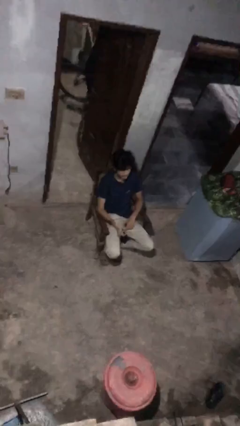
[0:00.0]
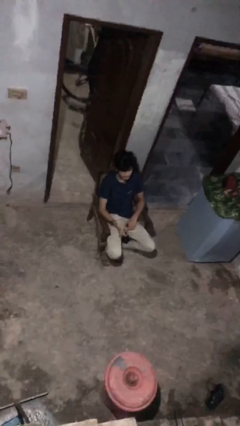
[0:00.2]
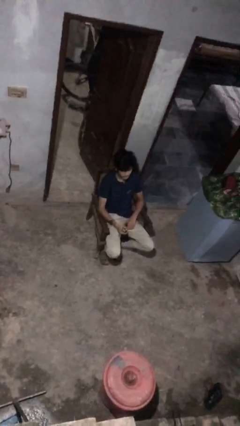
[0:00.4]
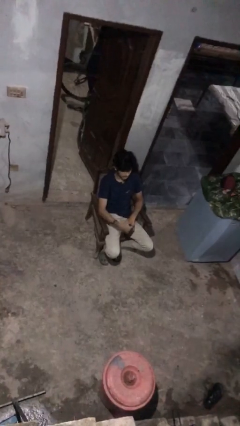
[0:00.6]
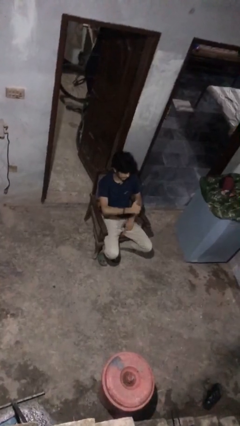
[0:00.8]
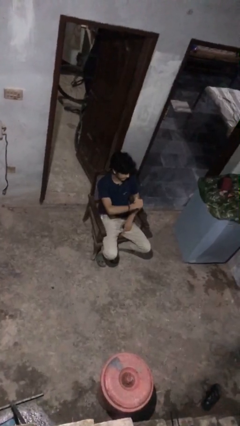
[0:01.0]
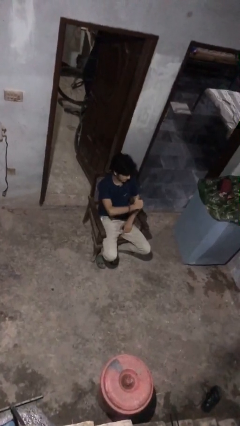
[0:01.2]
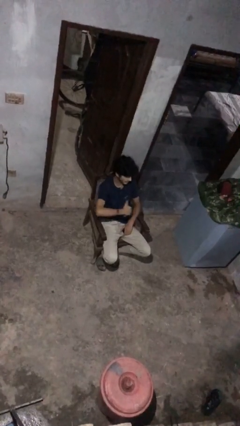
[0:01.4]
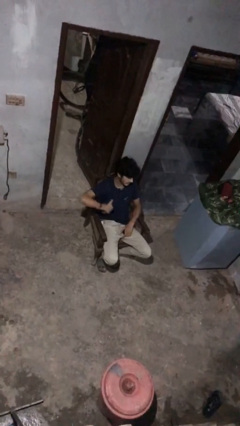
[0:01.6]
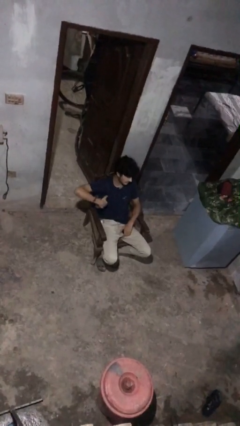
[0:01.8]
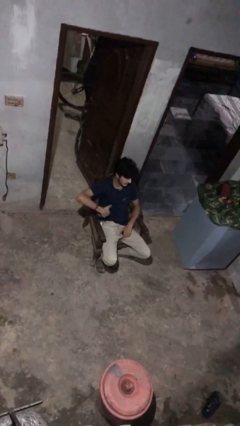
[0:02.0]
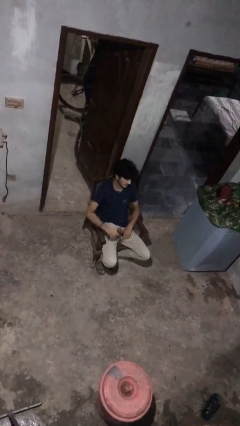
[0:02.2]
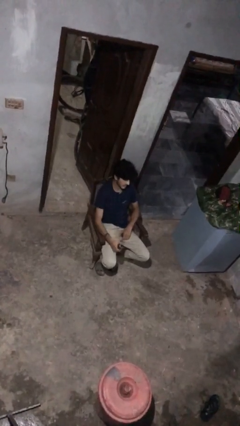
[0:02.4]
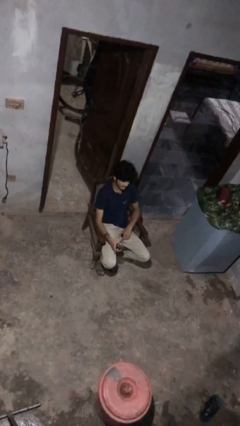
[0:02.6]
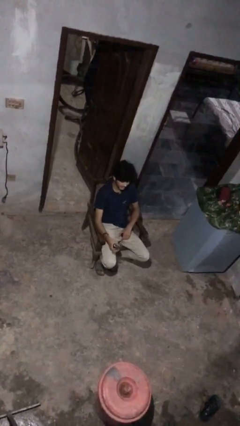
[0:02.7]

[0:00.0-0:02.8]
person applies deodorant

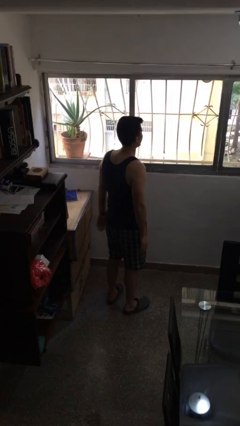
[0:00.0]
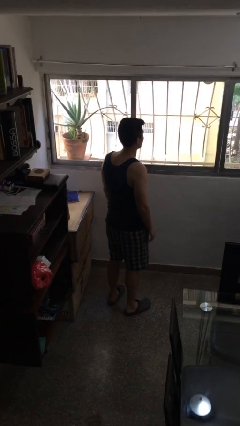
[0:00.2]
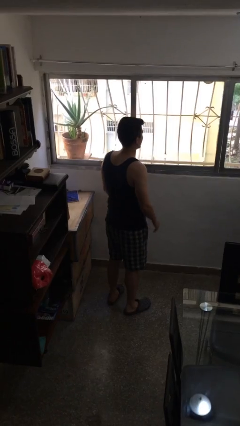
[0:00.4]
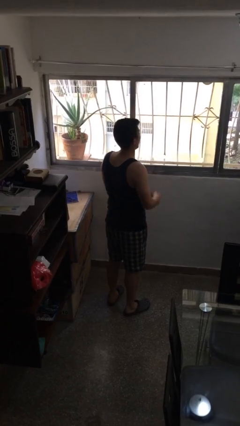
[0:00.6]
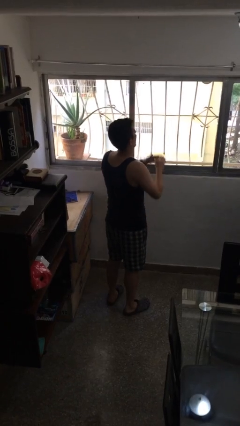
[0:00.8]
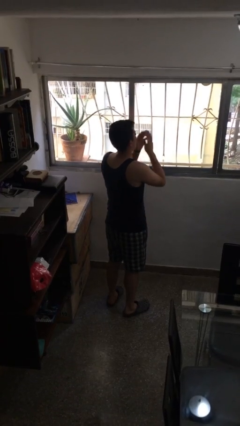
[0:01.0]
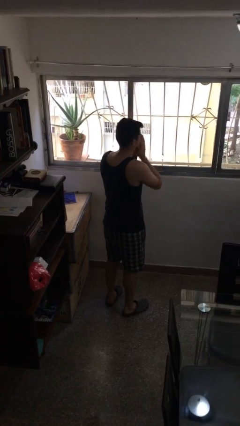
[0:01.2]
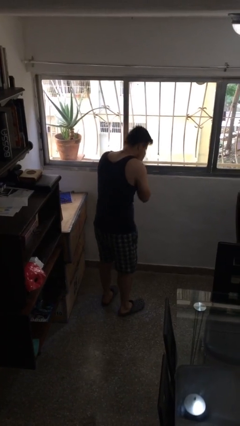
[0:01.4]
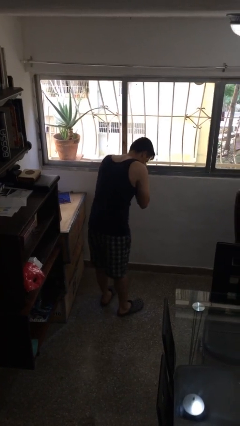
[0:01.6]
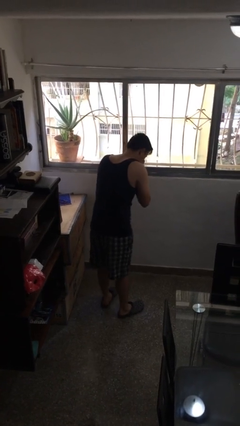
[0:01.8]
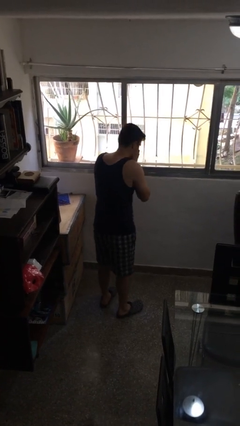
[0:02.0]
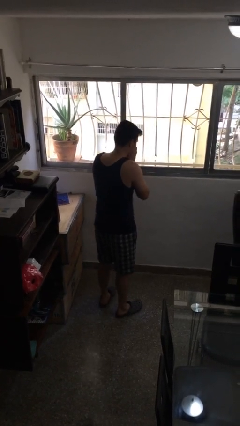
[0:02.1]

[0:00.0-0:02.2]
person sneezes into hand

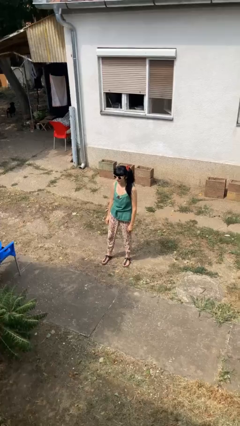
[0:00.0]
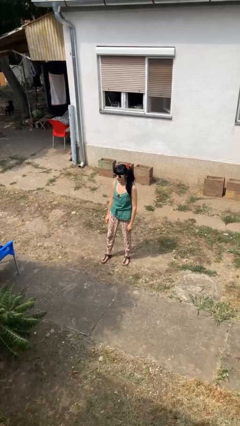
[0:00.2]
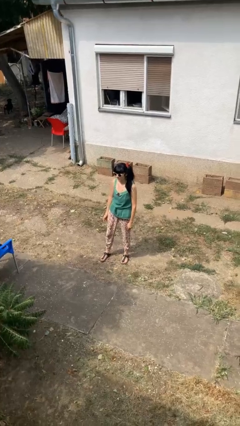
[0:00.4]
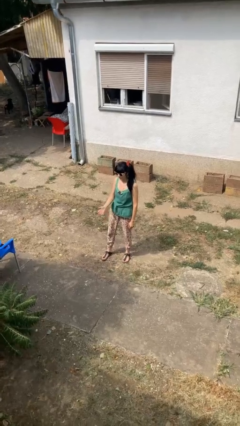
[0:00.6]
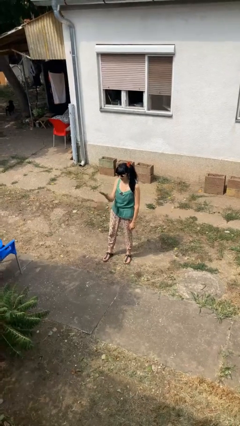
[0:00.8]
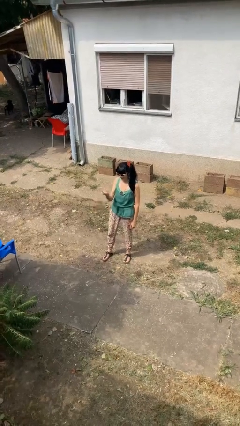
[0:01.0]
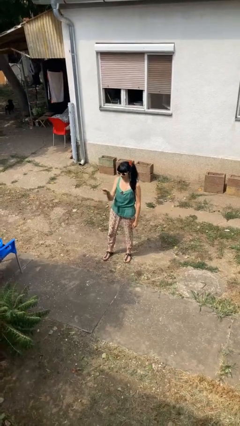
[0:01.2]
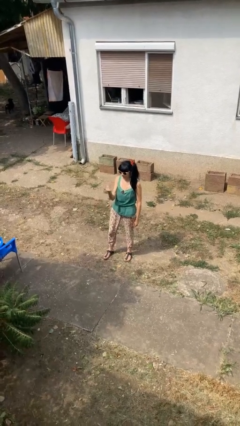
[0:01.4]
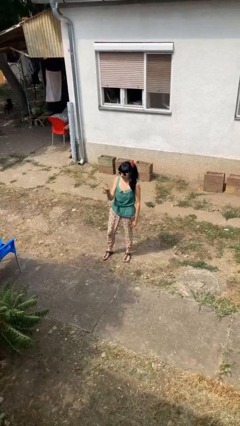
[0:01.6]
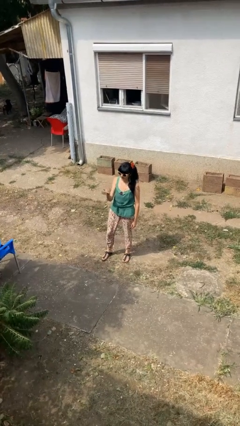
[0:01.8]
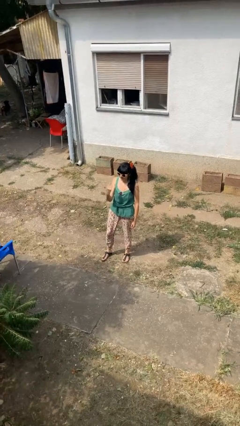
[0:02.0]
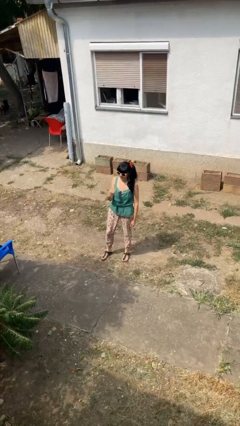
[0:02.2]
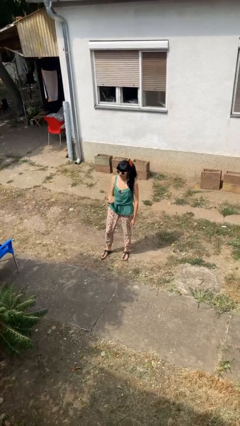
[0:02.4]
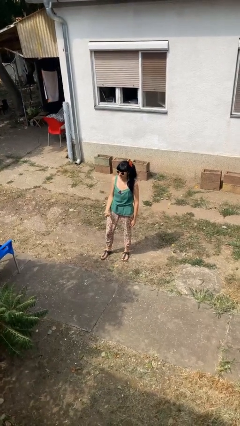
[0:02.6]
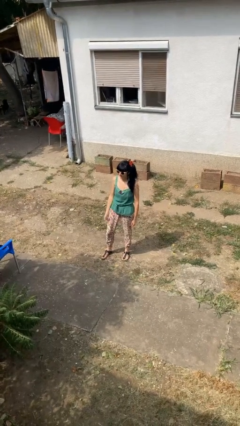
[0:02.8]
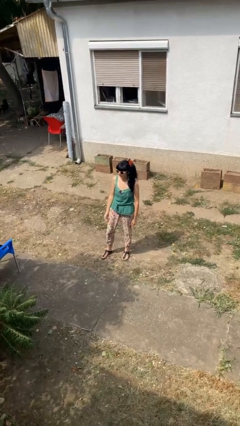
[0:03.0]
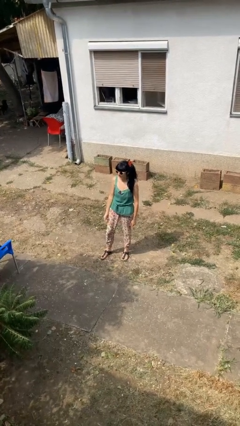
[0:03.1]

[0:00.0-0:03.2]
person gestures come here

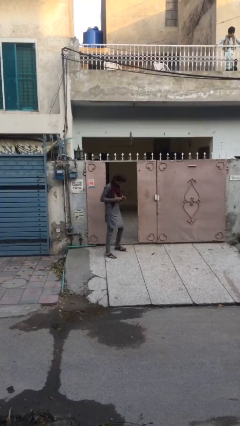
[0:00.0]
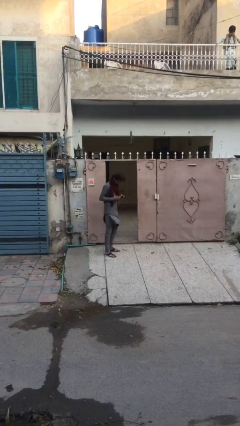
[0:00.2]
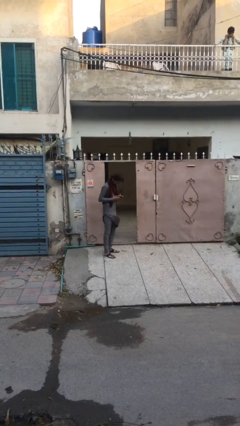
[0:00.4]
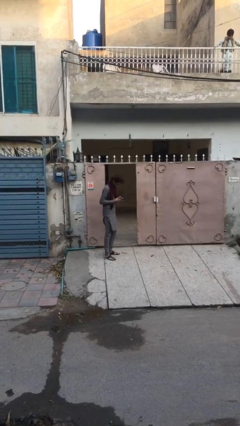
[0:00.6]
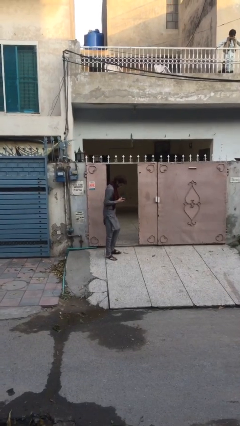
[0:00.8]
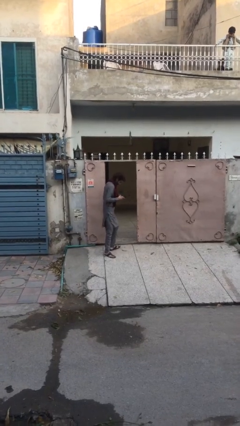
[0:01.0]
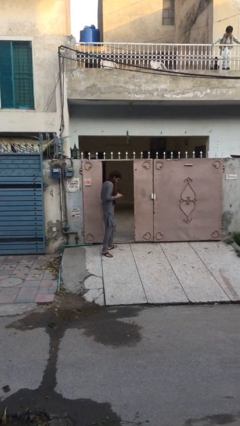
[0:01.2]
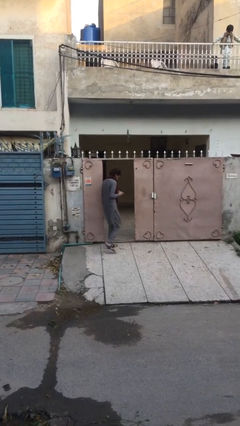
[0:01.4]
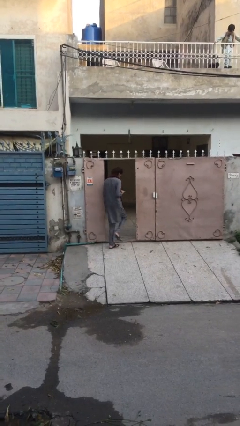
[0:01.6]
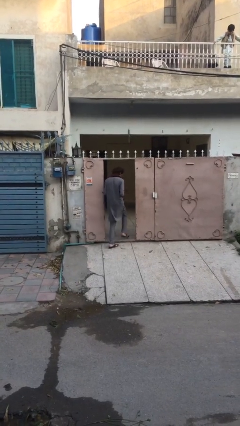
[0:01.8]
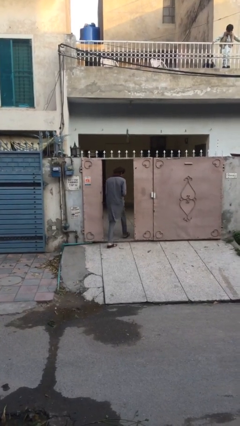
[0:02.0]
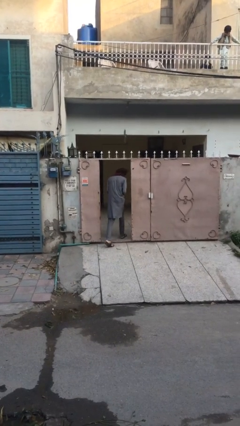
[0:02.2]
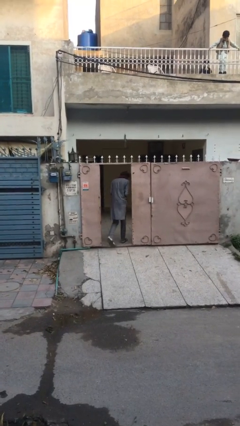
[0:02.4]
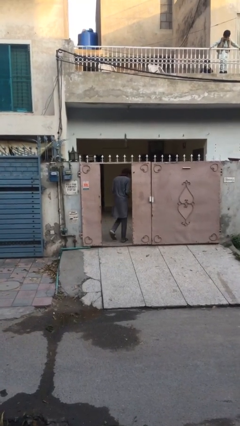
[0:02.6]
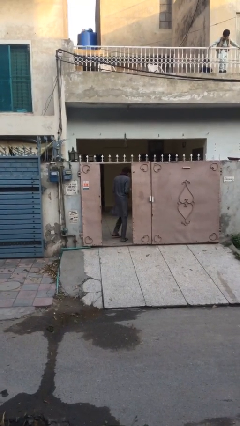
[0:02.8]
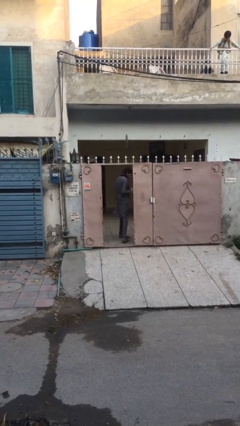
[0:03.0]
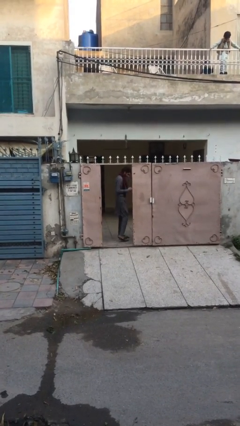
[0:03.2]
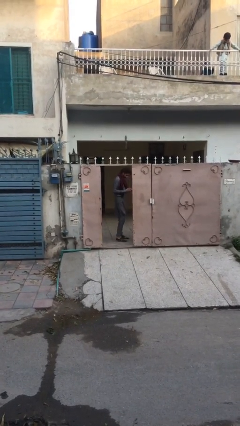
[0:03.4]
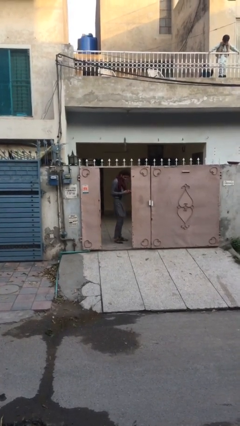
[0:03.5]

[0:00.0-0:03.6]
person enters scene through structure

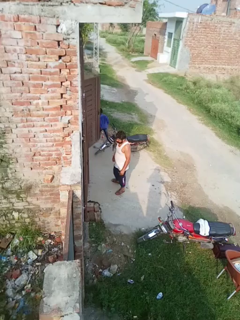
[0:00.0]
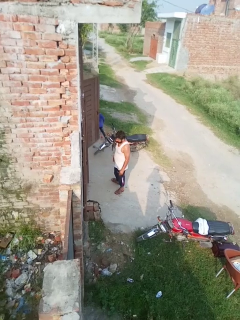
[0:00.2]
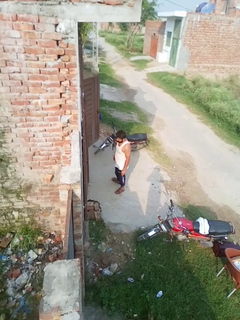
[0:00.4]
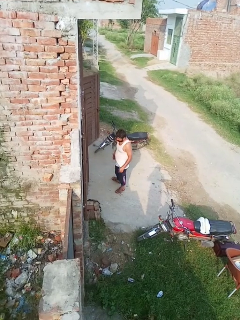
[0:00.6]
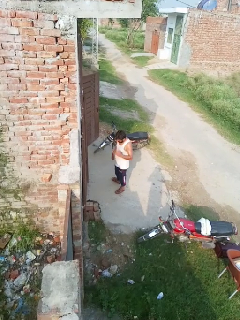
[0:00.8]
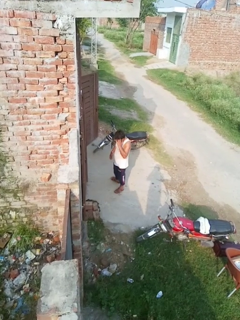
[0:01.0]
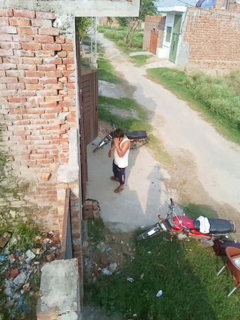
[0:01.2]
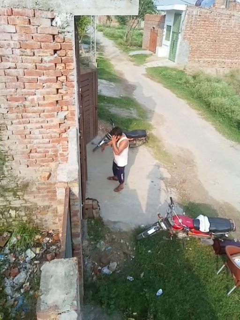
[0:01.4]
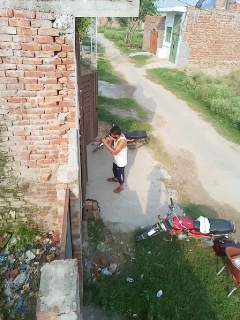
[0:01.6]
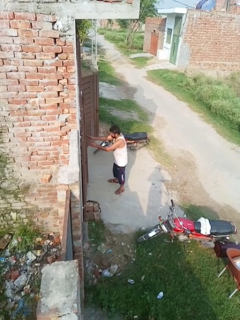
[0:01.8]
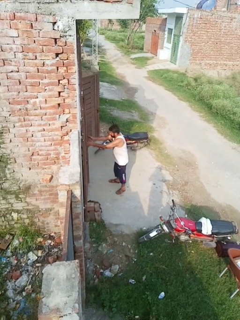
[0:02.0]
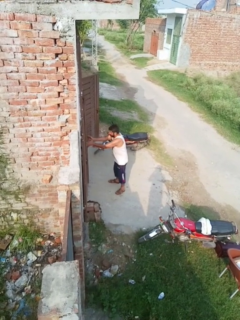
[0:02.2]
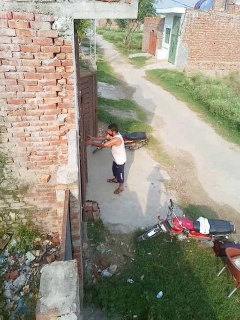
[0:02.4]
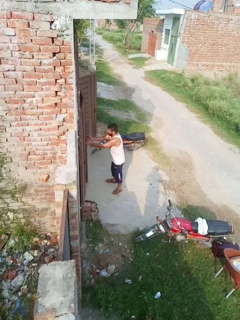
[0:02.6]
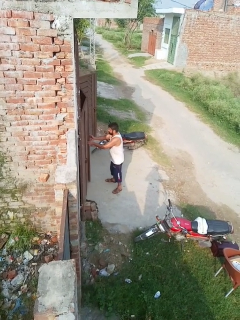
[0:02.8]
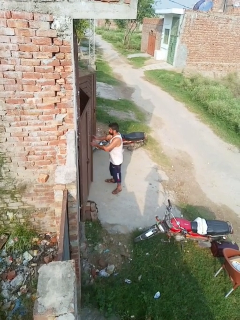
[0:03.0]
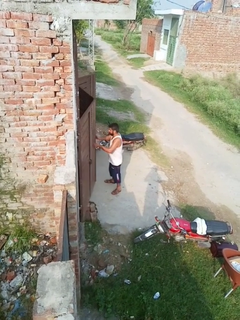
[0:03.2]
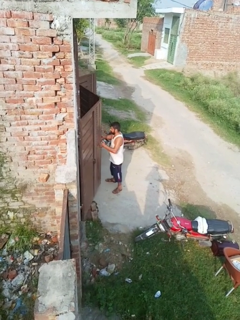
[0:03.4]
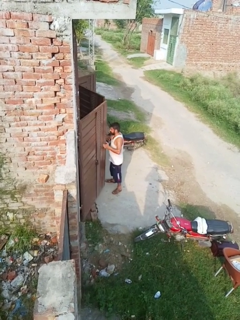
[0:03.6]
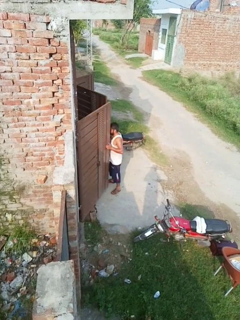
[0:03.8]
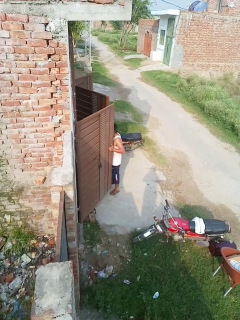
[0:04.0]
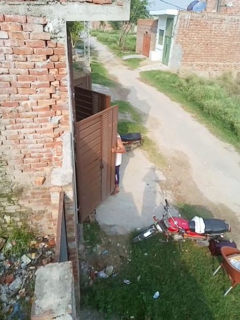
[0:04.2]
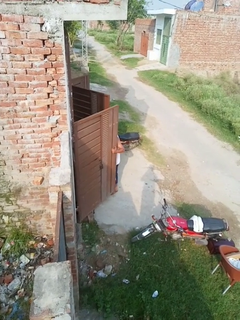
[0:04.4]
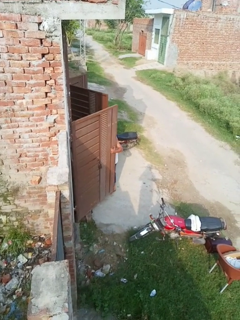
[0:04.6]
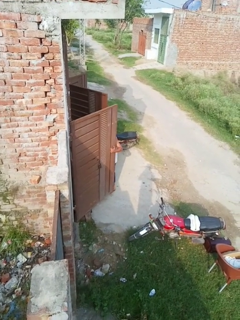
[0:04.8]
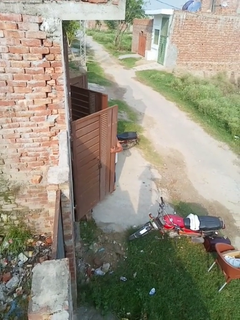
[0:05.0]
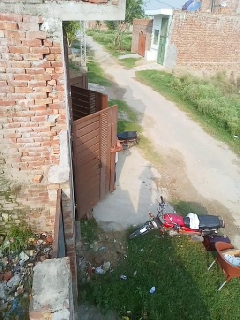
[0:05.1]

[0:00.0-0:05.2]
person opens gate

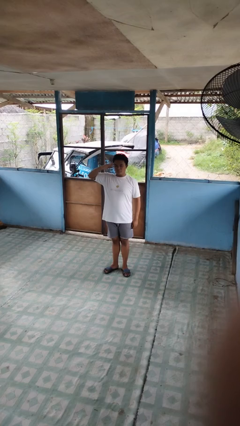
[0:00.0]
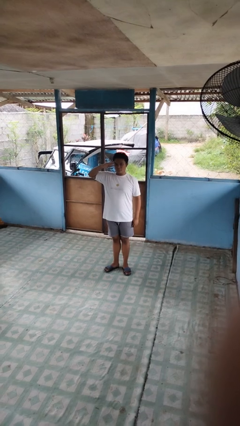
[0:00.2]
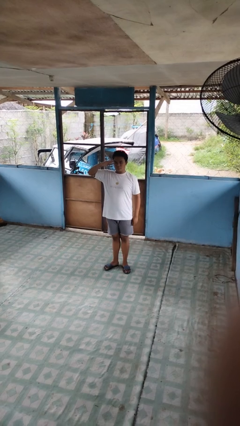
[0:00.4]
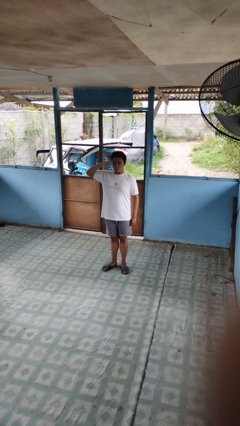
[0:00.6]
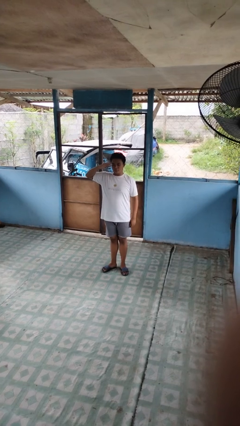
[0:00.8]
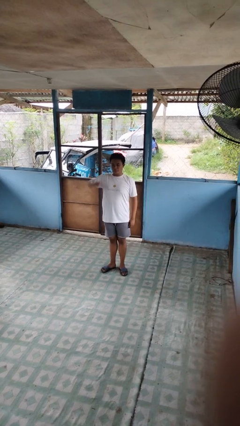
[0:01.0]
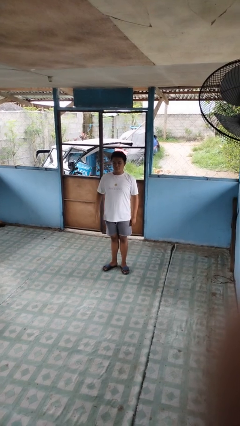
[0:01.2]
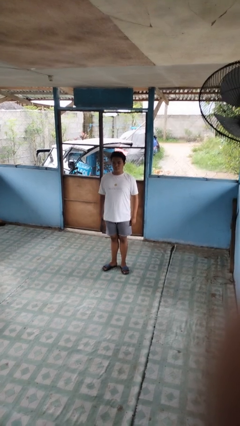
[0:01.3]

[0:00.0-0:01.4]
person salutes

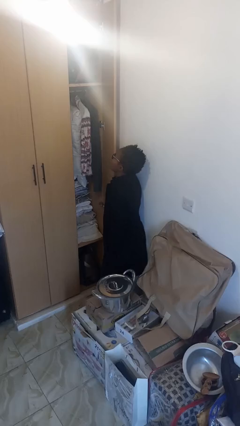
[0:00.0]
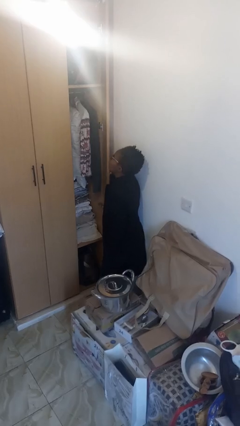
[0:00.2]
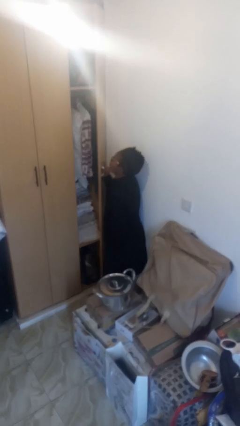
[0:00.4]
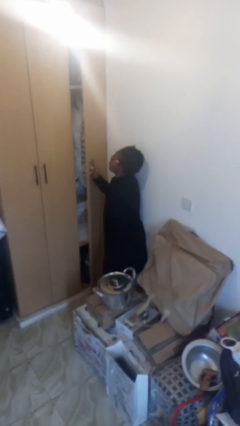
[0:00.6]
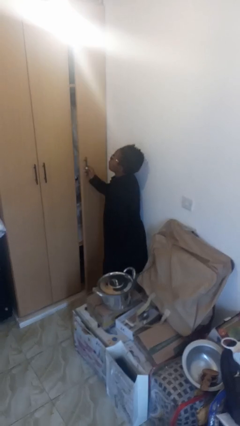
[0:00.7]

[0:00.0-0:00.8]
person closes closet door
